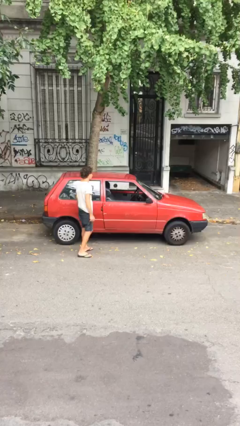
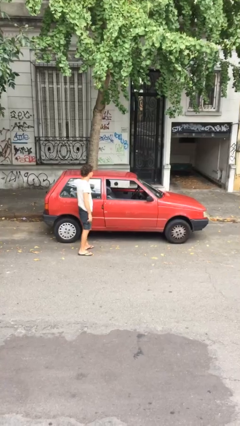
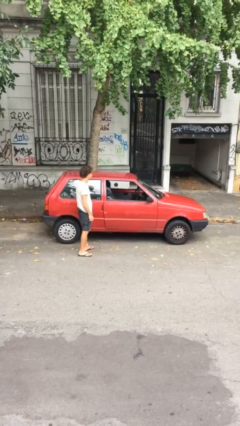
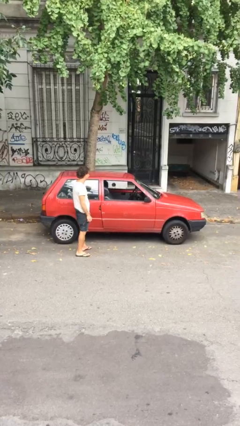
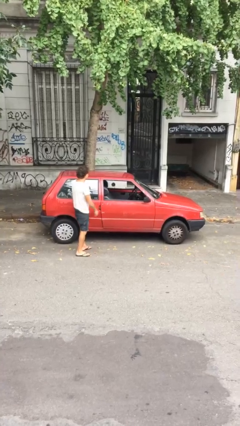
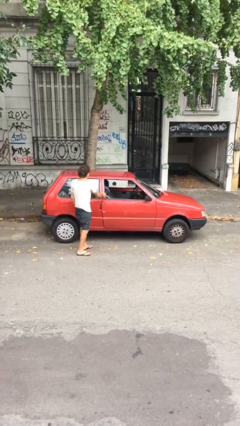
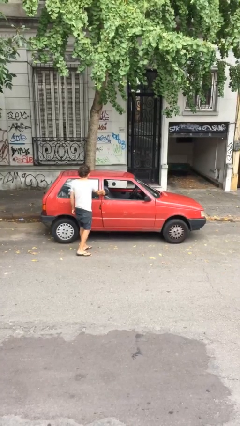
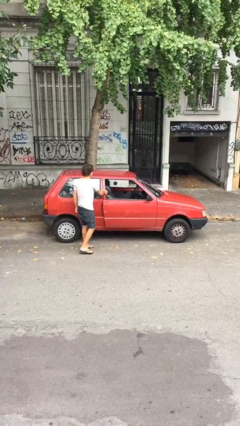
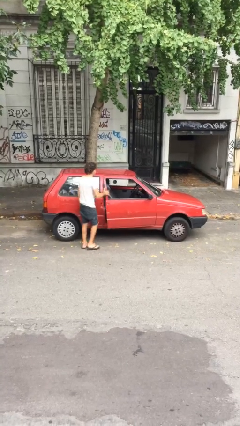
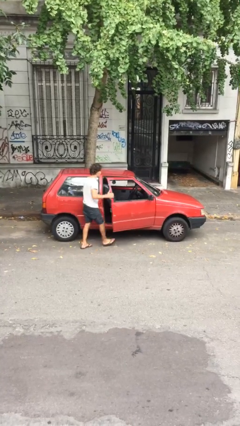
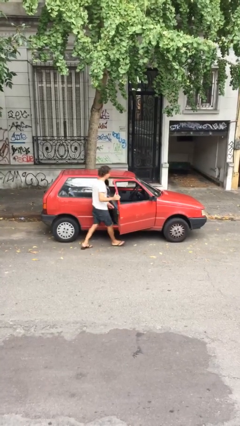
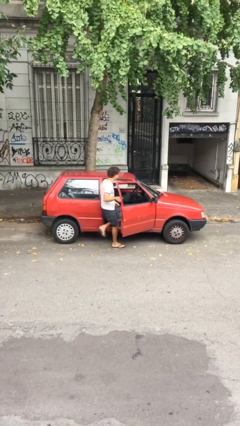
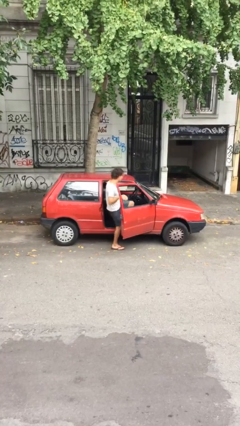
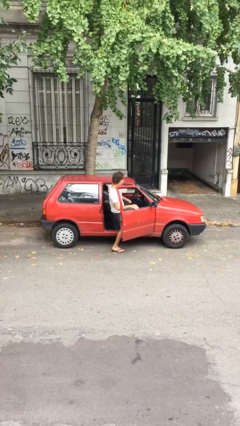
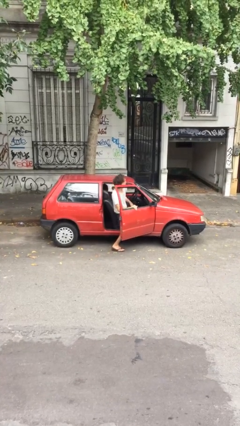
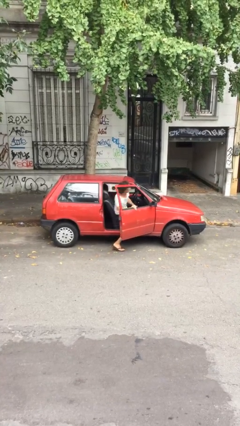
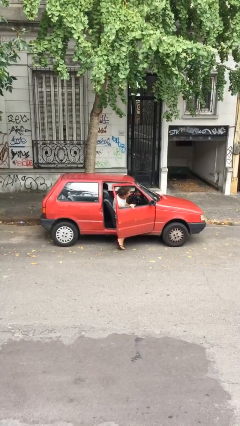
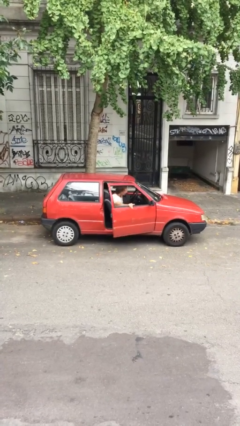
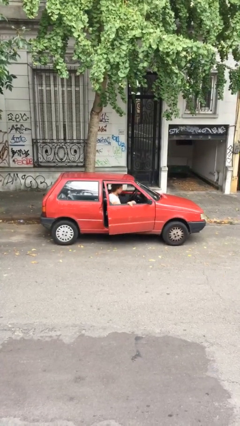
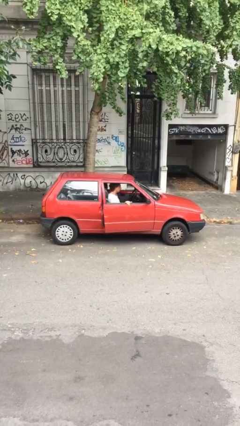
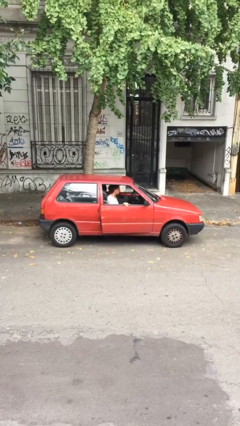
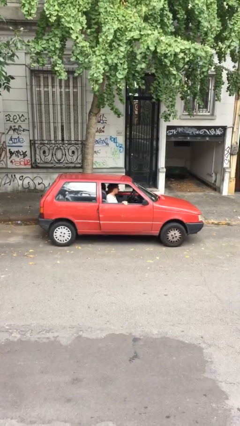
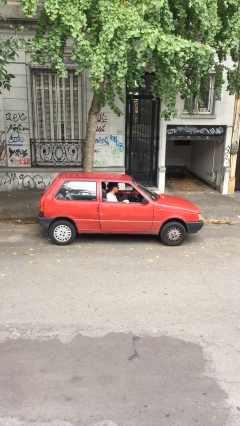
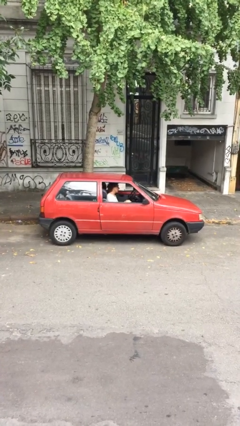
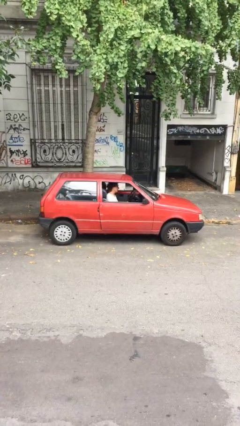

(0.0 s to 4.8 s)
car picks up person

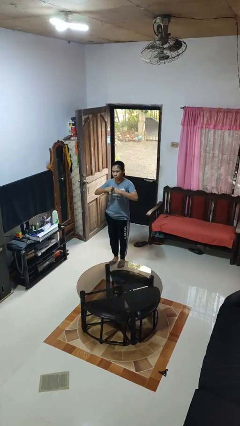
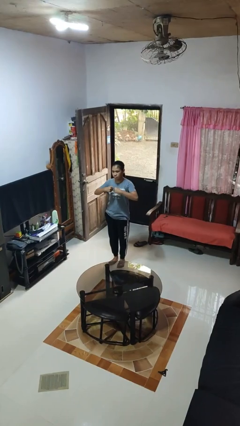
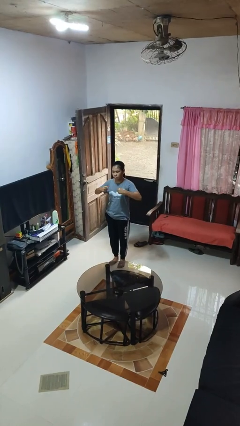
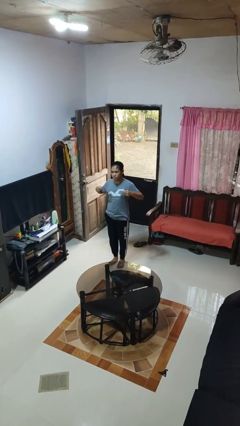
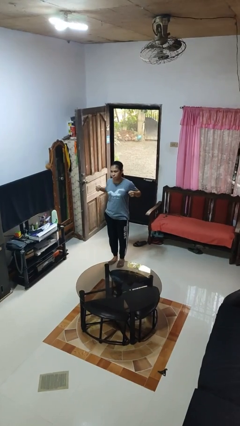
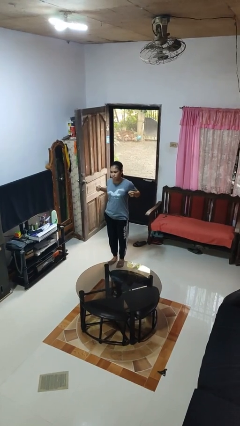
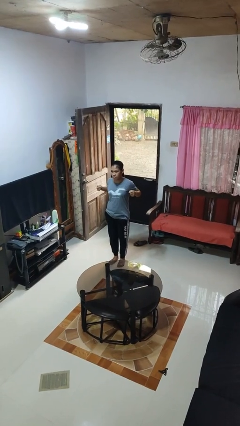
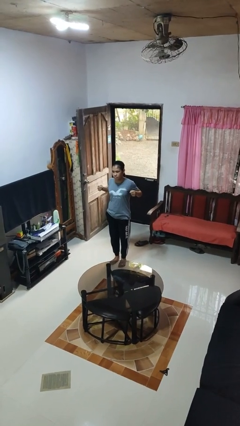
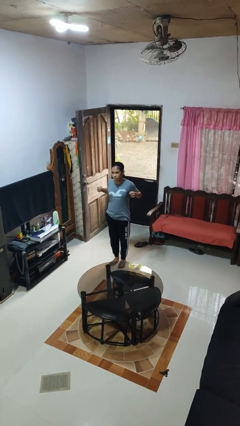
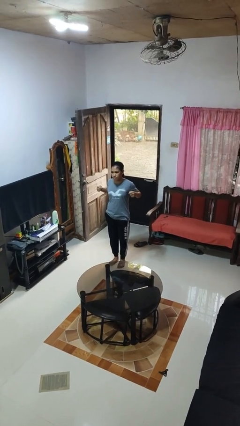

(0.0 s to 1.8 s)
person gestures zoom in

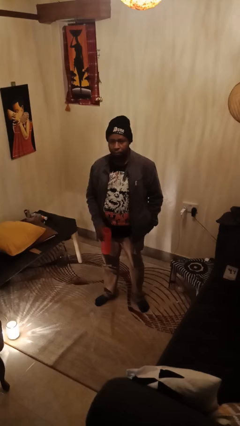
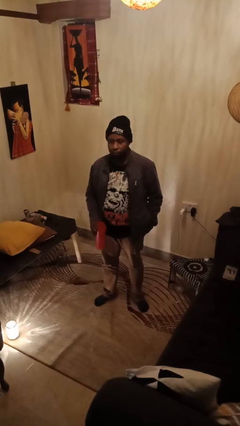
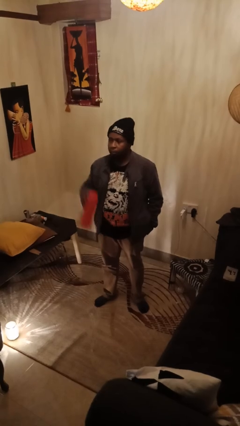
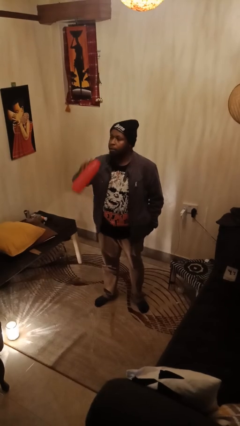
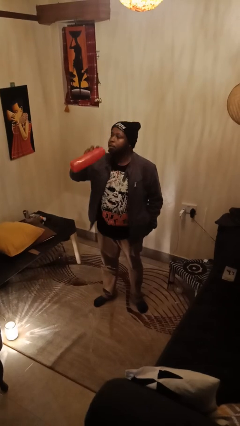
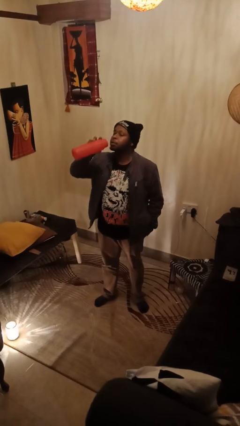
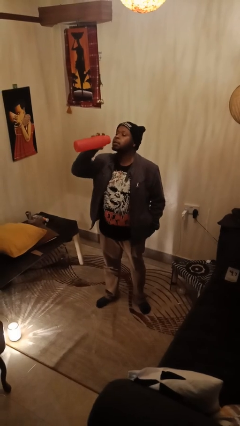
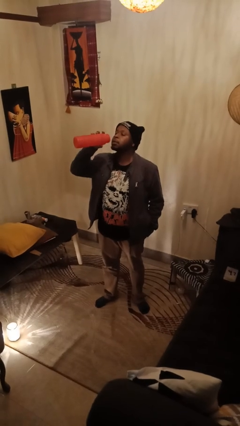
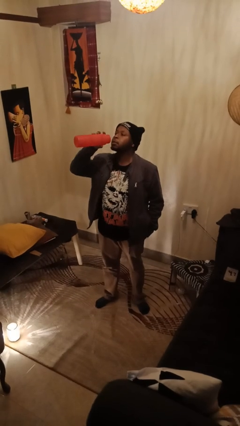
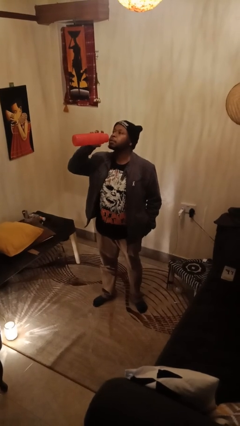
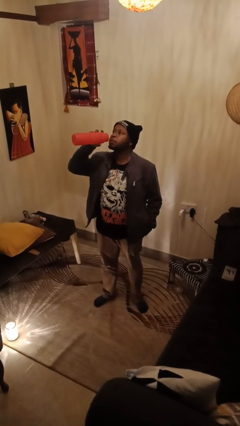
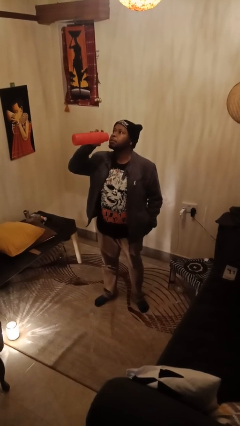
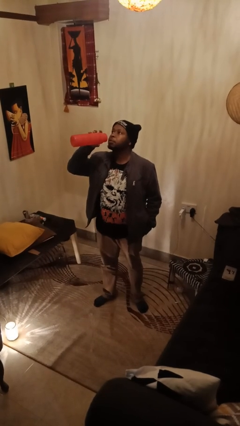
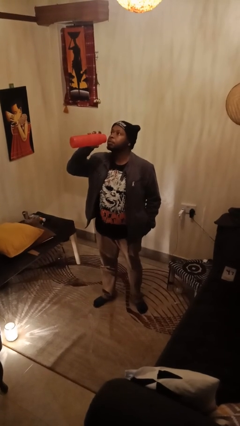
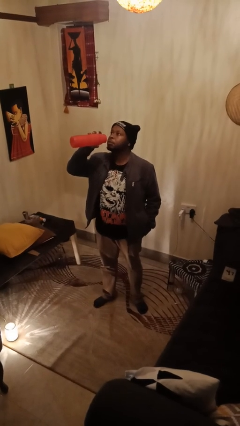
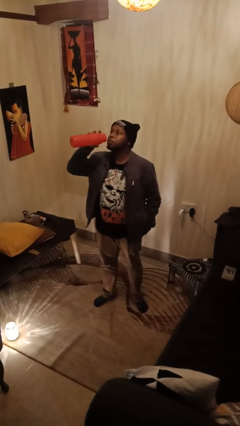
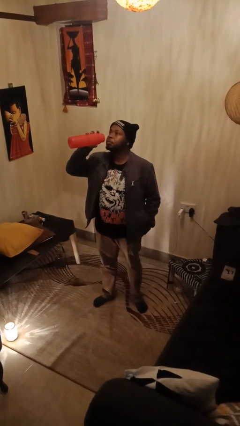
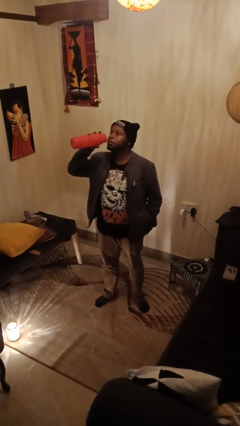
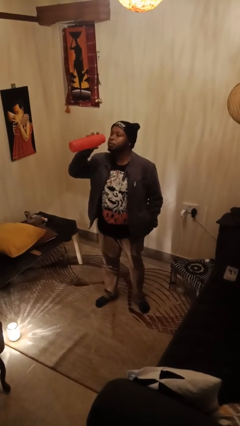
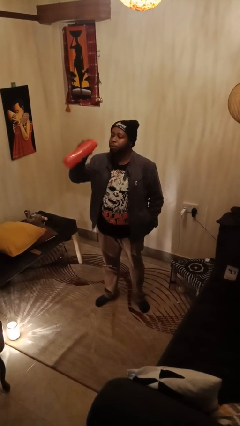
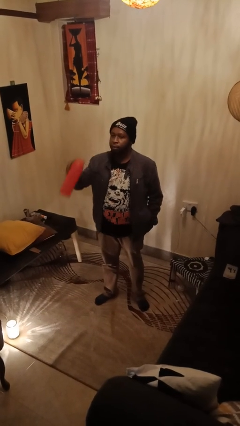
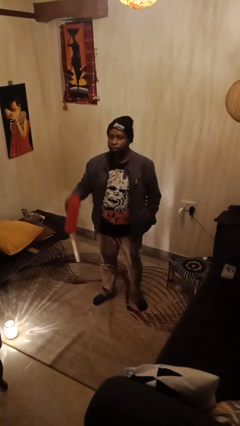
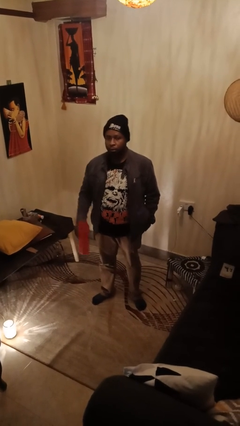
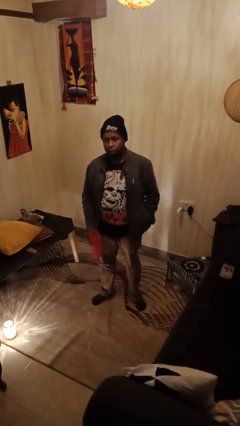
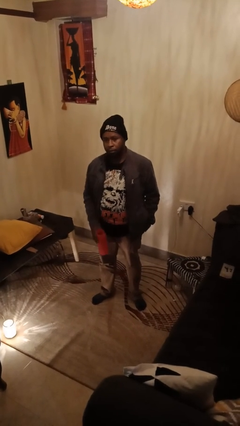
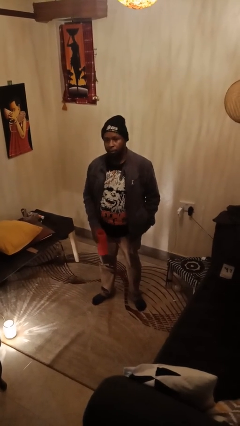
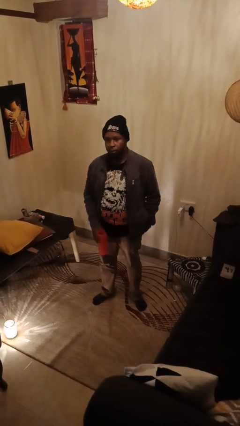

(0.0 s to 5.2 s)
person drinks from bottle

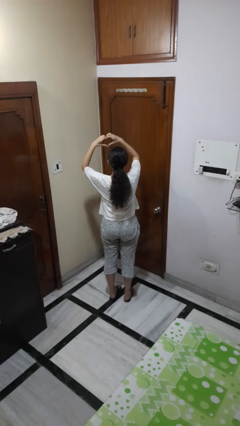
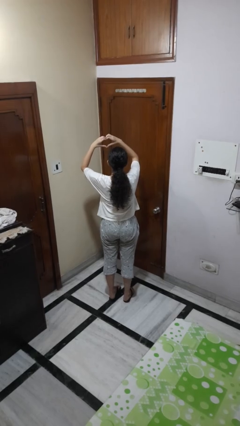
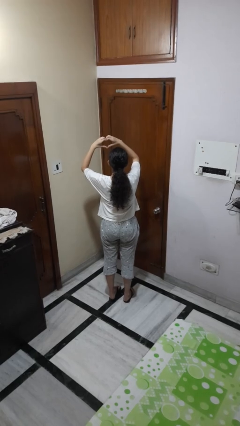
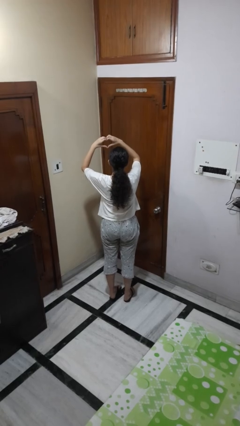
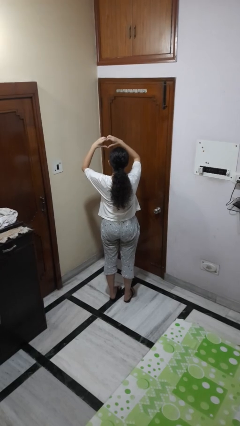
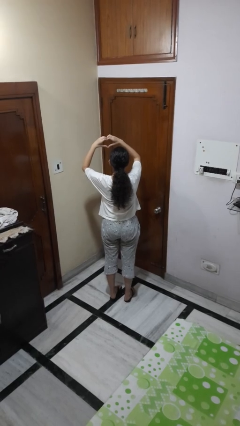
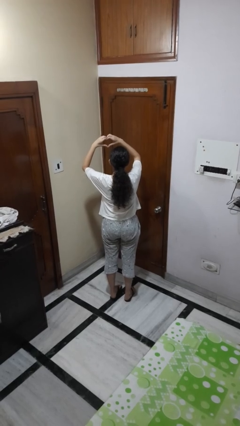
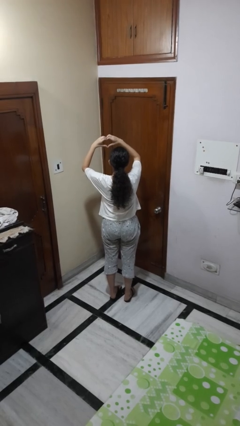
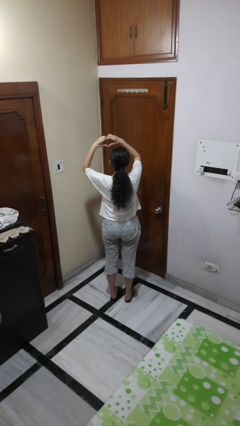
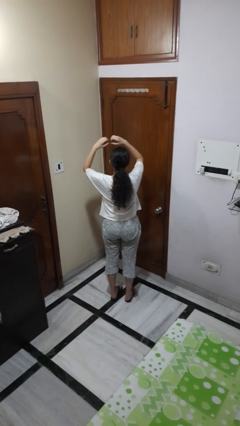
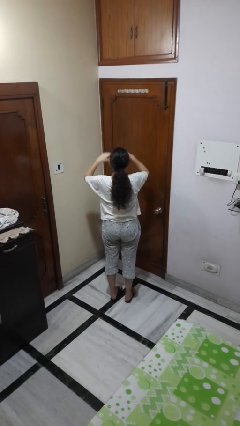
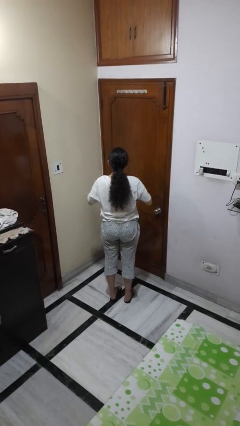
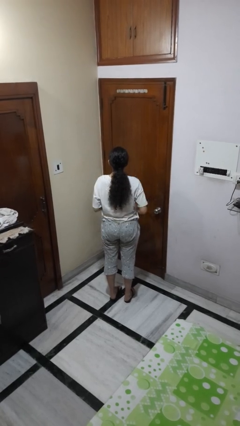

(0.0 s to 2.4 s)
person gestures heart

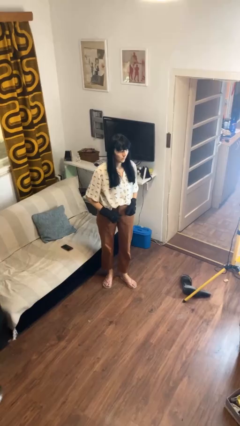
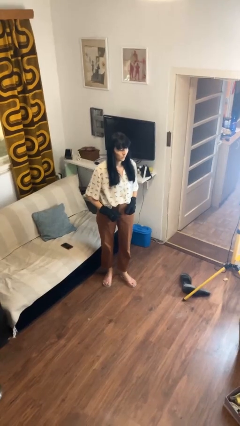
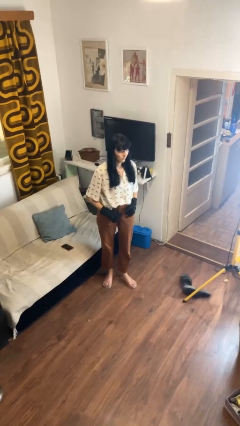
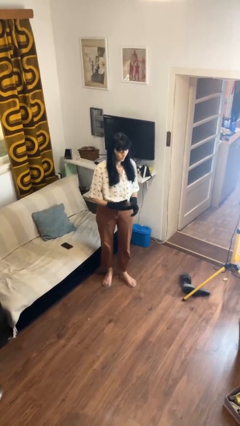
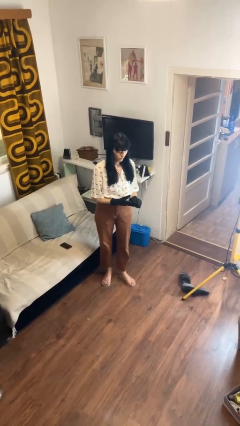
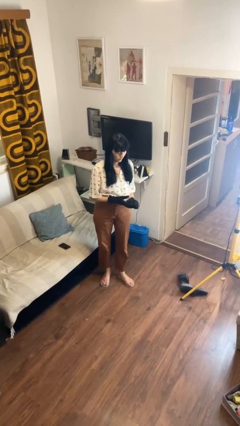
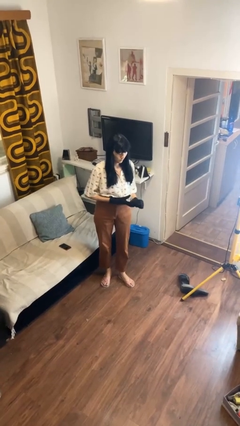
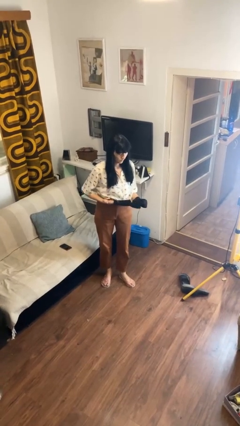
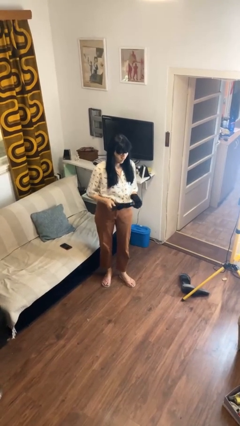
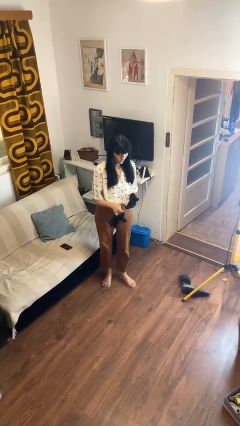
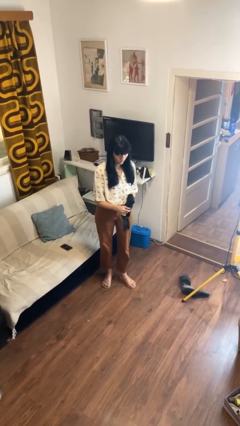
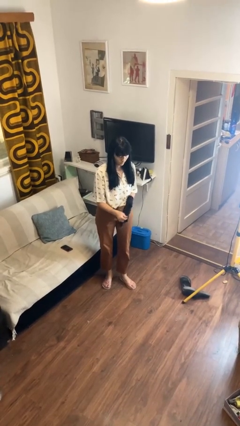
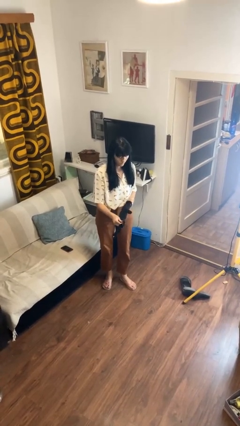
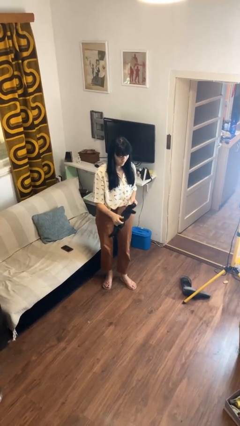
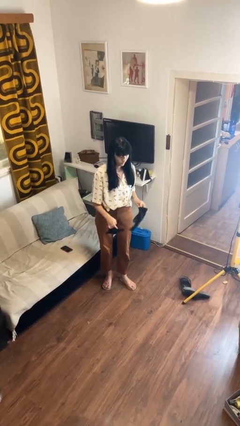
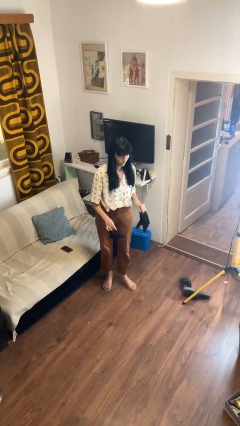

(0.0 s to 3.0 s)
person takes off gloves

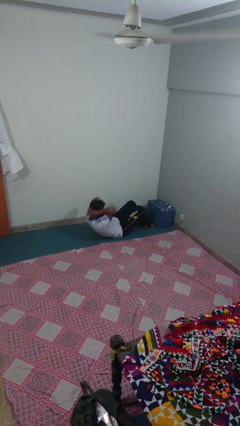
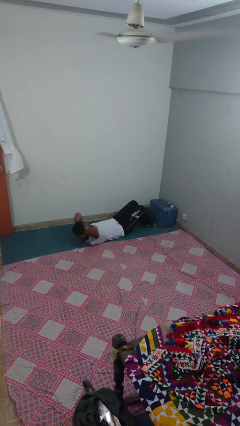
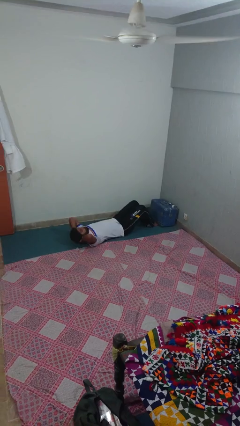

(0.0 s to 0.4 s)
person exercises with situp
